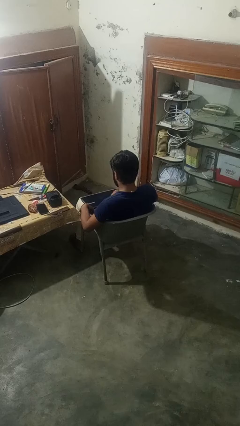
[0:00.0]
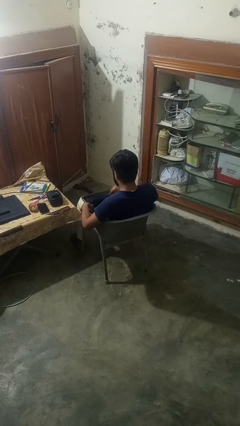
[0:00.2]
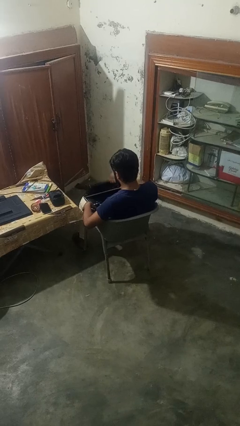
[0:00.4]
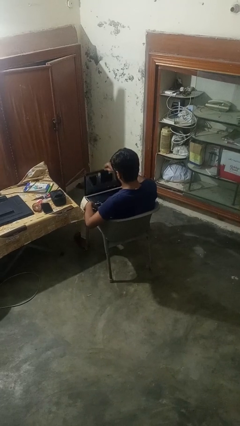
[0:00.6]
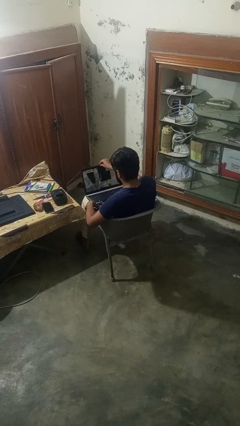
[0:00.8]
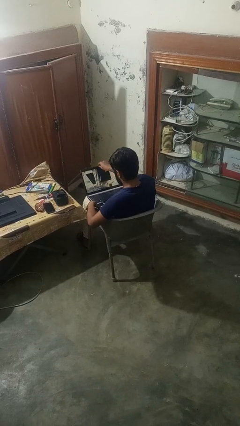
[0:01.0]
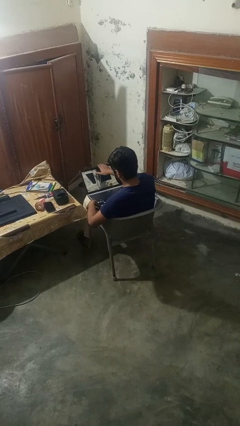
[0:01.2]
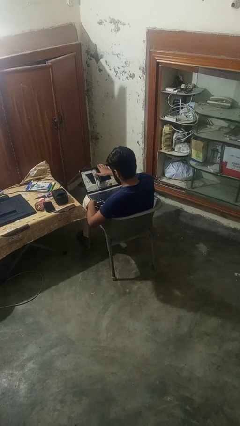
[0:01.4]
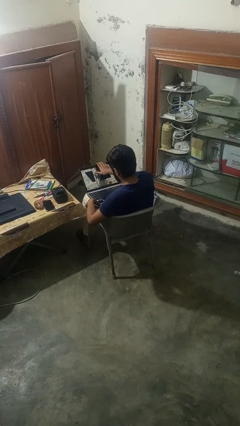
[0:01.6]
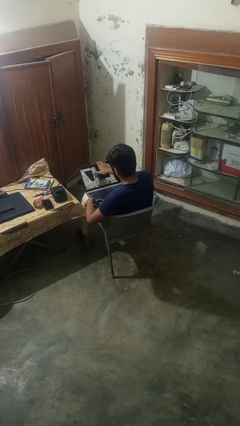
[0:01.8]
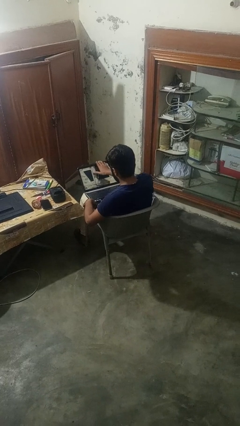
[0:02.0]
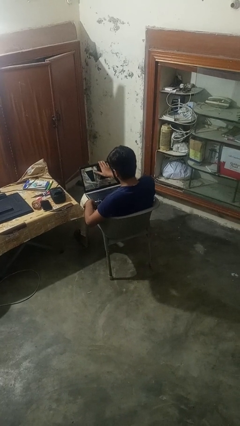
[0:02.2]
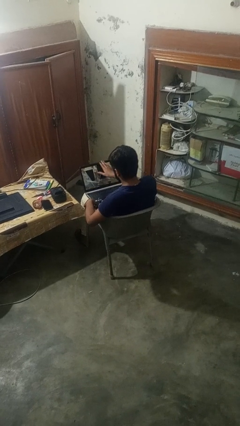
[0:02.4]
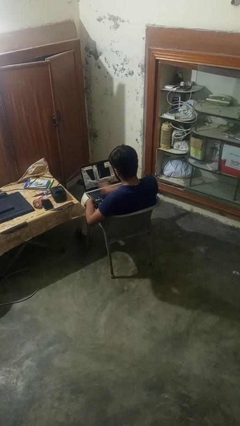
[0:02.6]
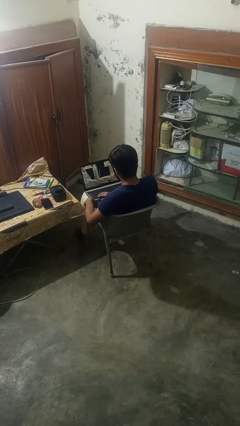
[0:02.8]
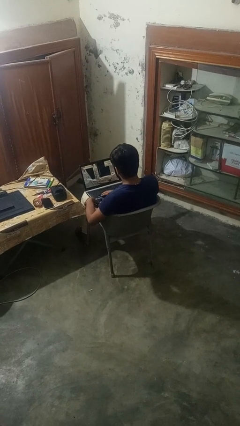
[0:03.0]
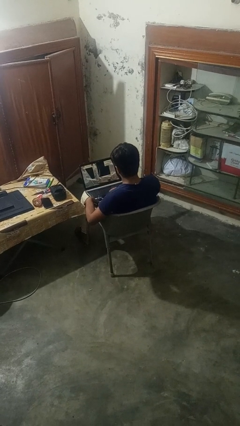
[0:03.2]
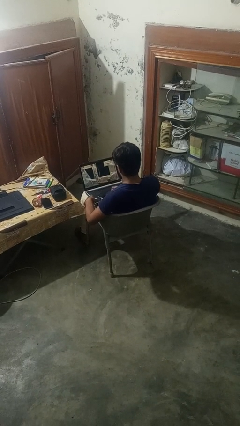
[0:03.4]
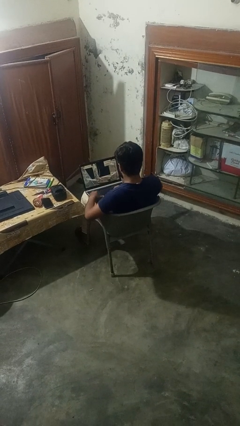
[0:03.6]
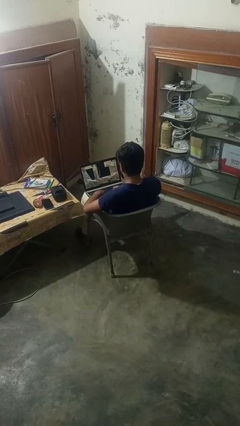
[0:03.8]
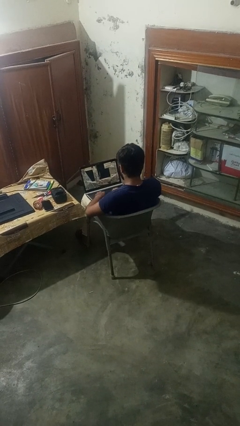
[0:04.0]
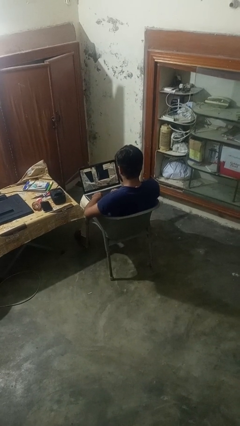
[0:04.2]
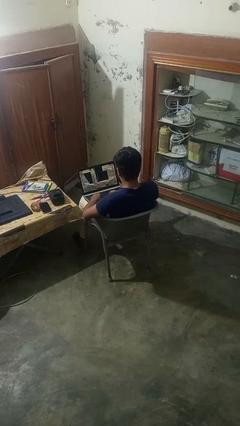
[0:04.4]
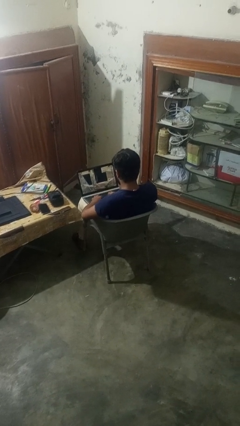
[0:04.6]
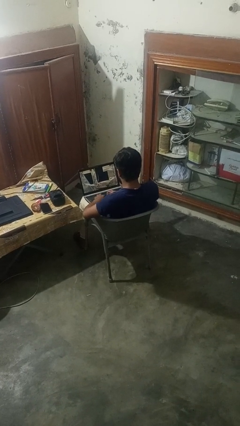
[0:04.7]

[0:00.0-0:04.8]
person opens laptop

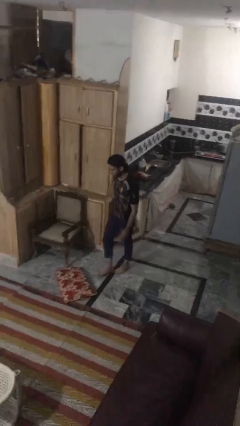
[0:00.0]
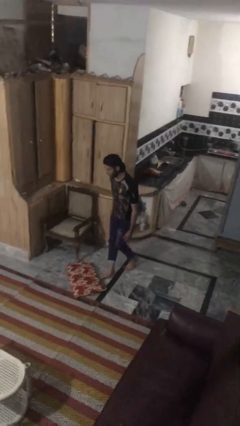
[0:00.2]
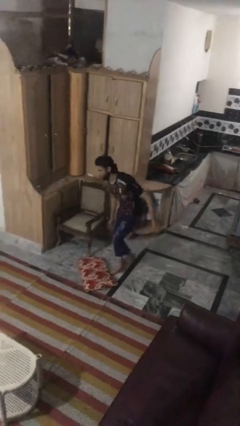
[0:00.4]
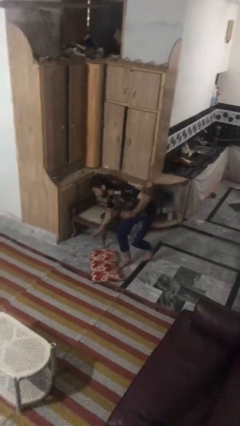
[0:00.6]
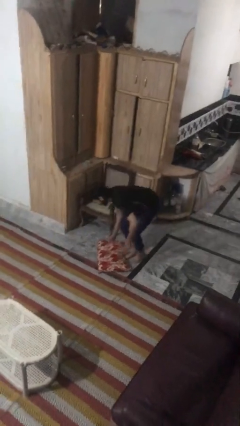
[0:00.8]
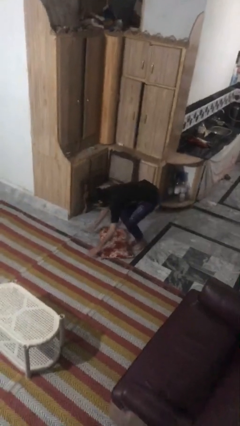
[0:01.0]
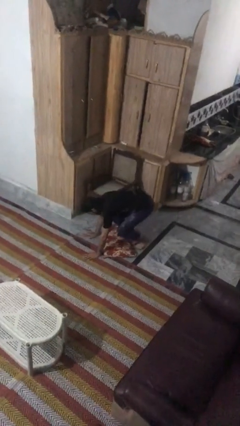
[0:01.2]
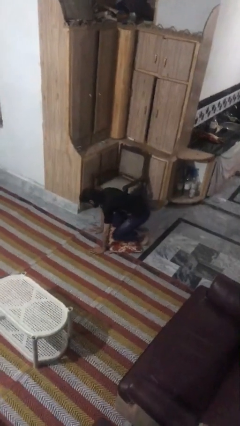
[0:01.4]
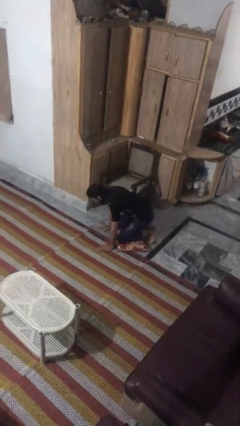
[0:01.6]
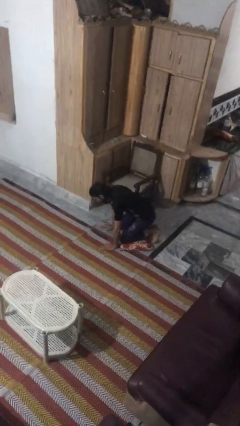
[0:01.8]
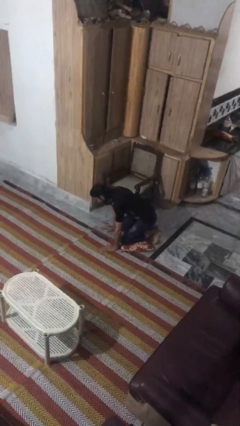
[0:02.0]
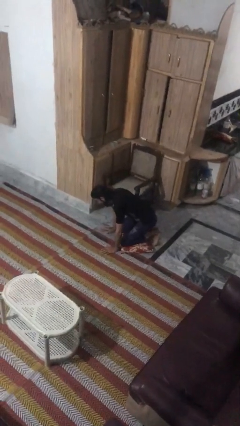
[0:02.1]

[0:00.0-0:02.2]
person trips on object on floor

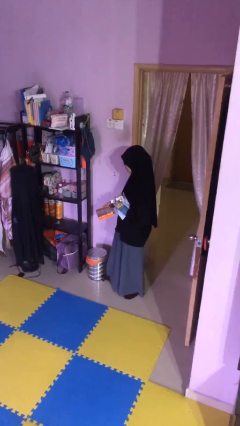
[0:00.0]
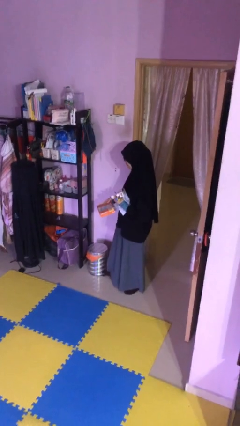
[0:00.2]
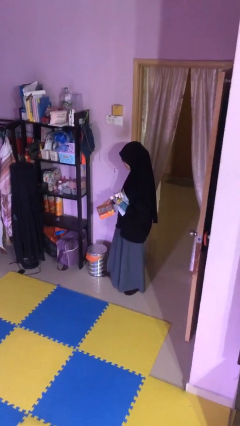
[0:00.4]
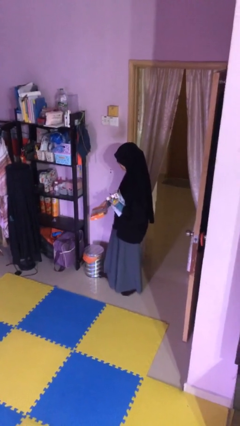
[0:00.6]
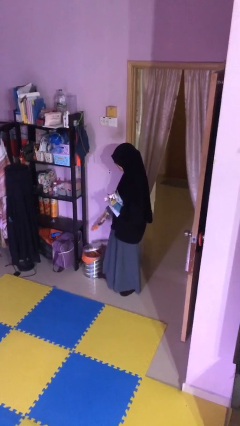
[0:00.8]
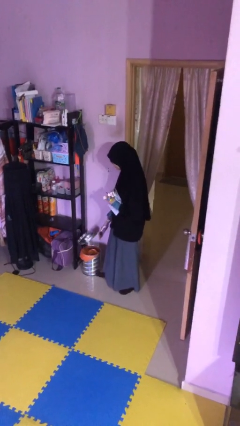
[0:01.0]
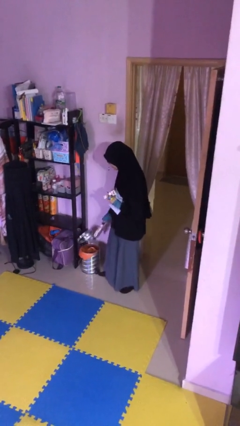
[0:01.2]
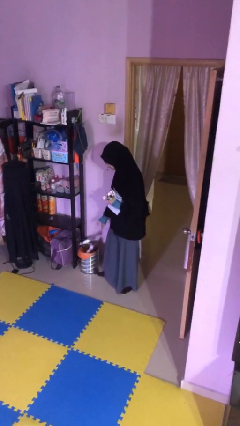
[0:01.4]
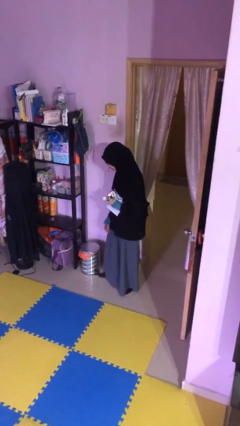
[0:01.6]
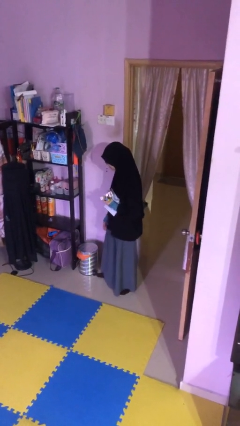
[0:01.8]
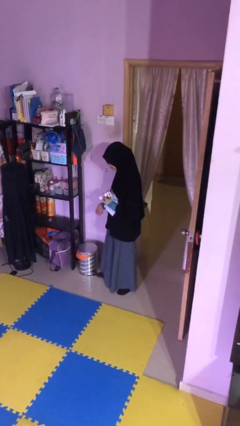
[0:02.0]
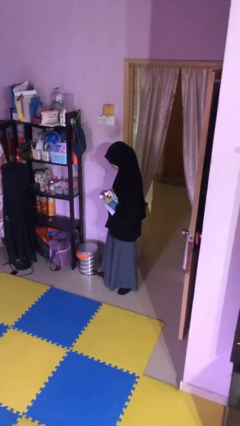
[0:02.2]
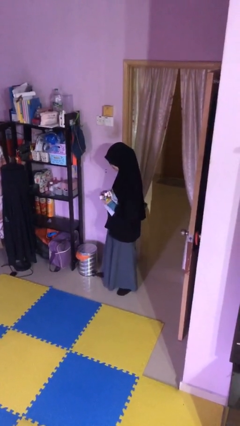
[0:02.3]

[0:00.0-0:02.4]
person discards trash

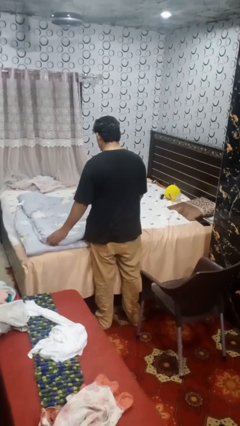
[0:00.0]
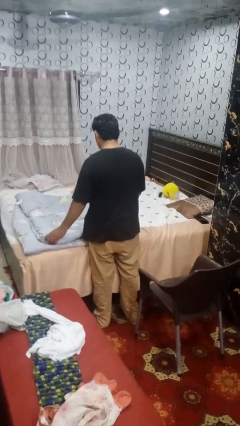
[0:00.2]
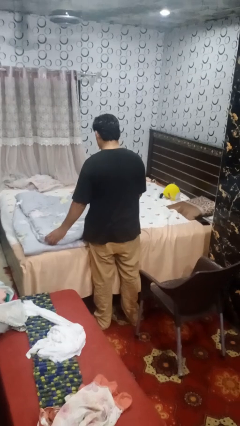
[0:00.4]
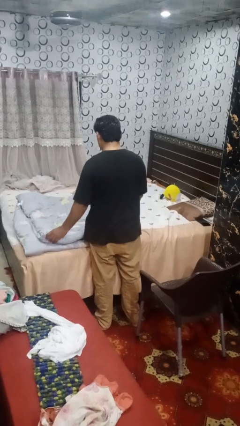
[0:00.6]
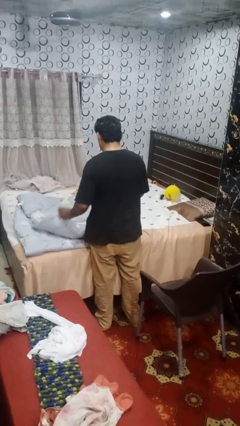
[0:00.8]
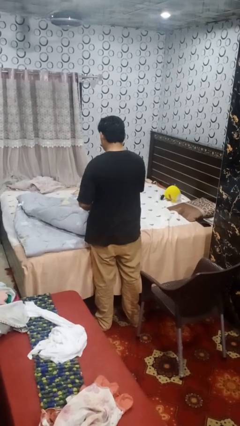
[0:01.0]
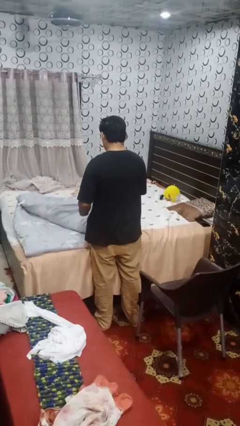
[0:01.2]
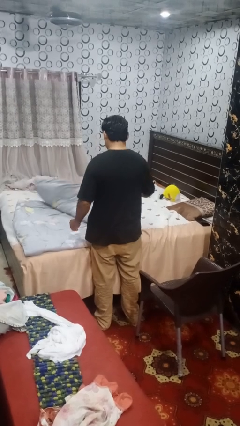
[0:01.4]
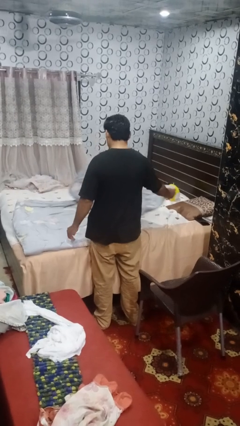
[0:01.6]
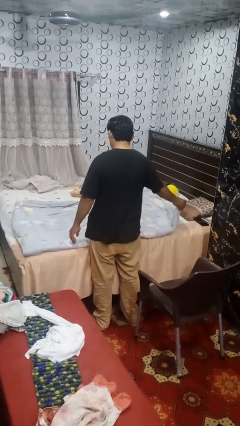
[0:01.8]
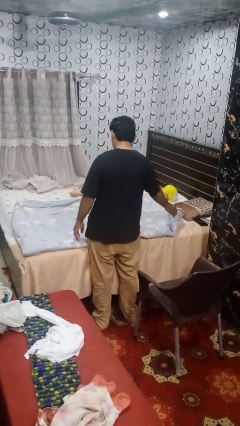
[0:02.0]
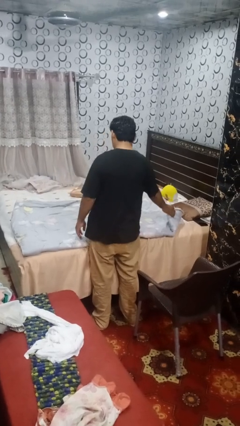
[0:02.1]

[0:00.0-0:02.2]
person unfolds blanket

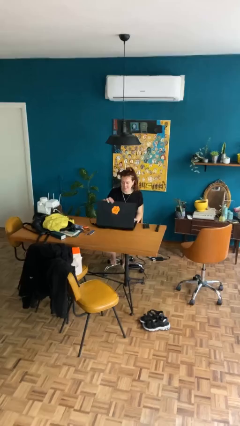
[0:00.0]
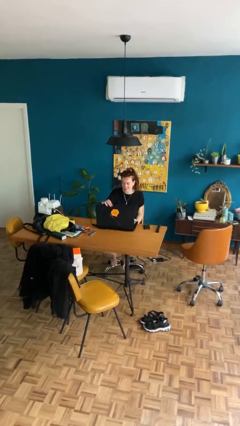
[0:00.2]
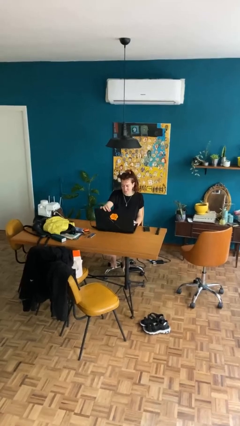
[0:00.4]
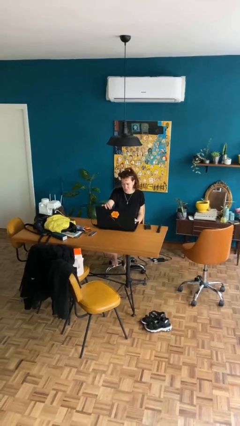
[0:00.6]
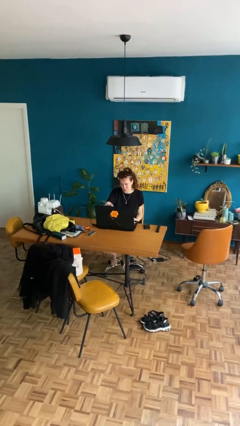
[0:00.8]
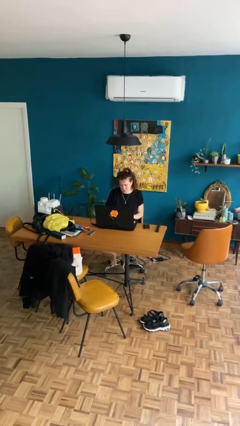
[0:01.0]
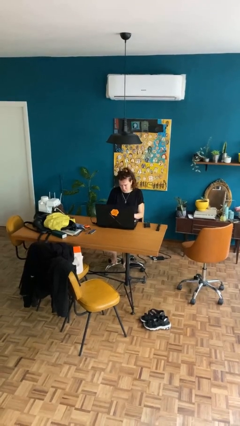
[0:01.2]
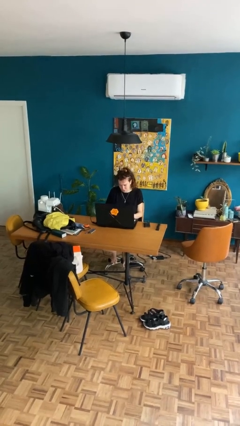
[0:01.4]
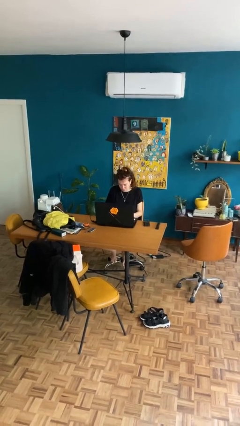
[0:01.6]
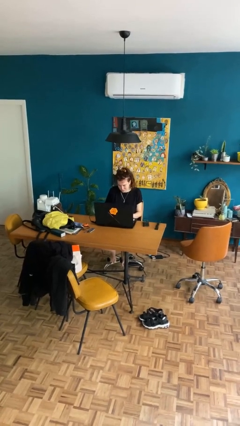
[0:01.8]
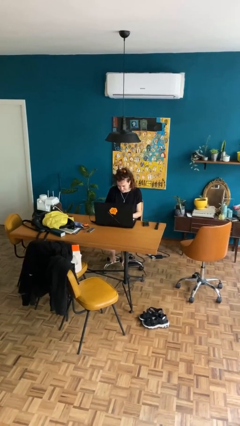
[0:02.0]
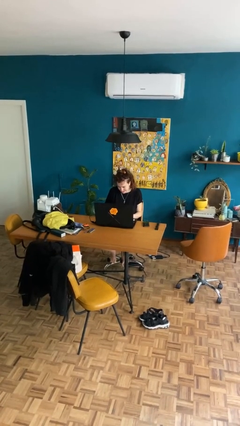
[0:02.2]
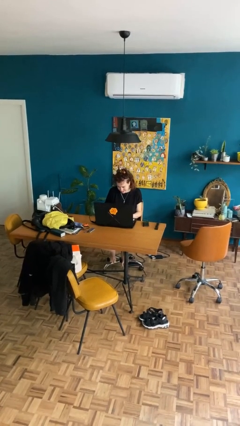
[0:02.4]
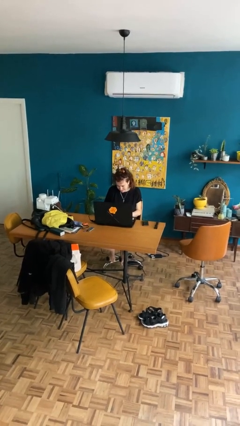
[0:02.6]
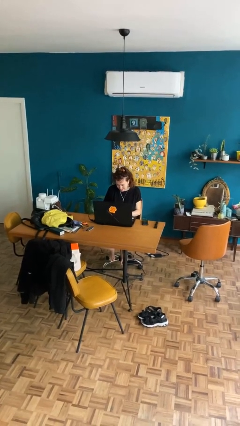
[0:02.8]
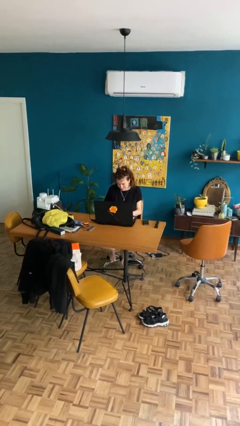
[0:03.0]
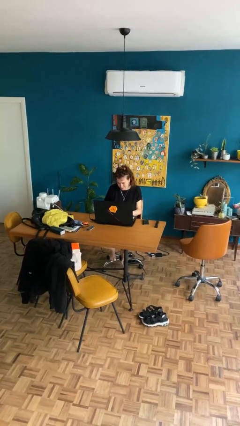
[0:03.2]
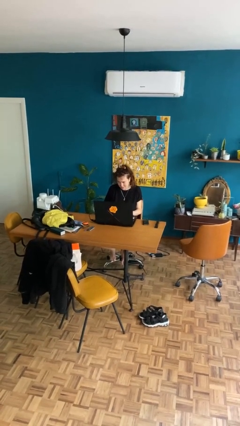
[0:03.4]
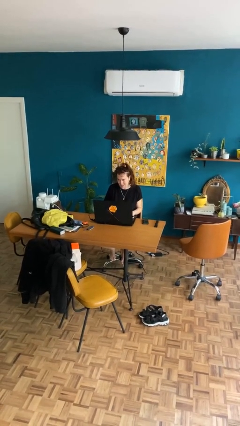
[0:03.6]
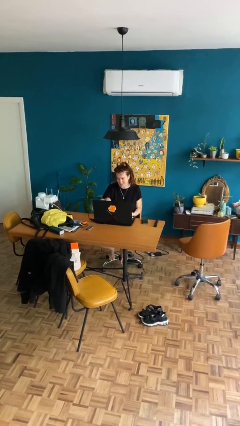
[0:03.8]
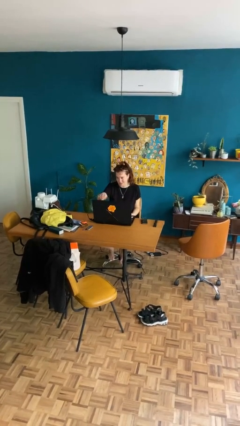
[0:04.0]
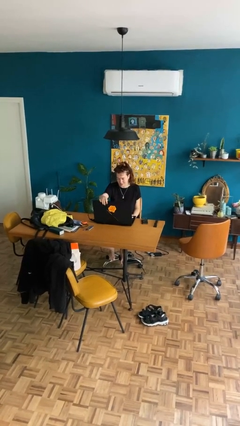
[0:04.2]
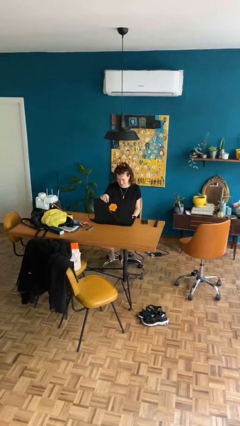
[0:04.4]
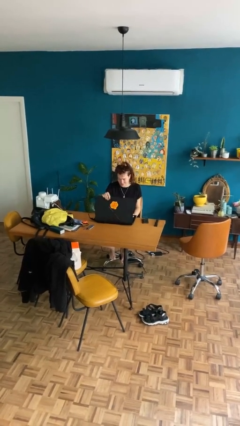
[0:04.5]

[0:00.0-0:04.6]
person interacts with laptop

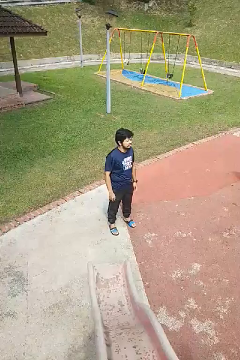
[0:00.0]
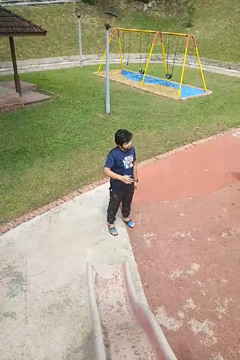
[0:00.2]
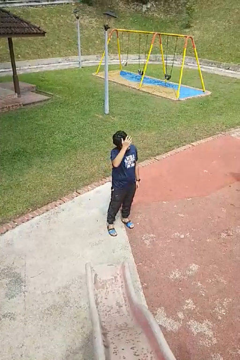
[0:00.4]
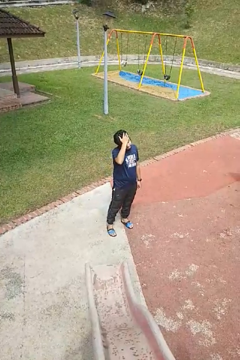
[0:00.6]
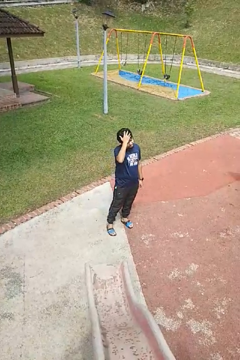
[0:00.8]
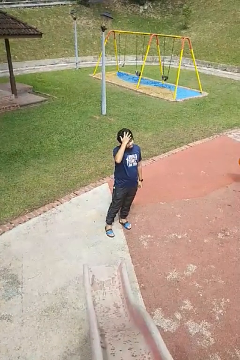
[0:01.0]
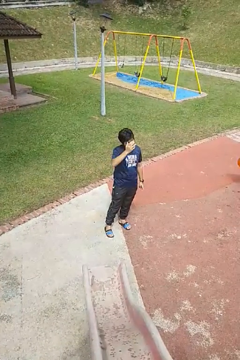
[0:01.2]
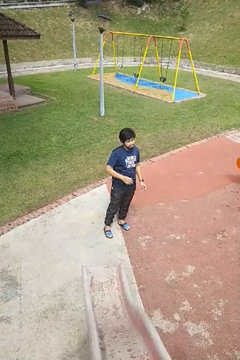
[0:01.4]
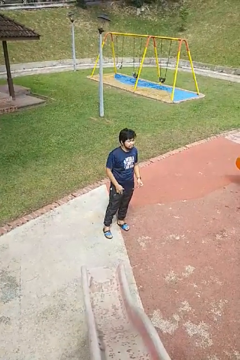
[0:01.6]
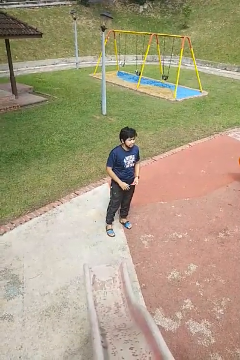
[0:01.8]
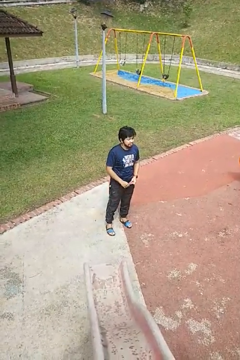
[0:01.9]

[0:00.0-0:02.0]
person pats head
